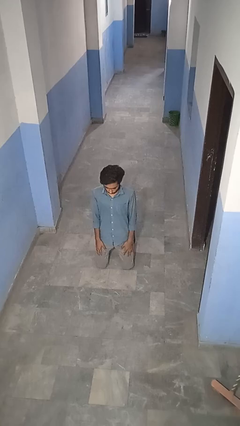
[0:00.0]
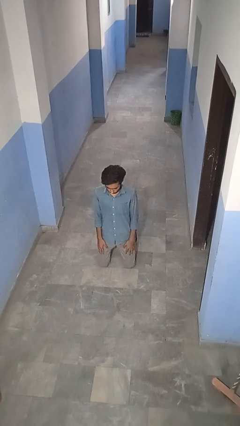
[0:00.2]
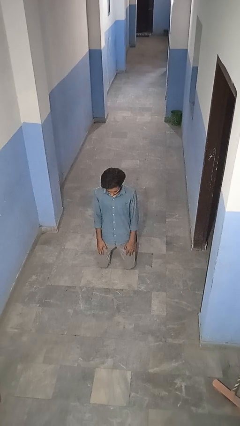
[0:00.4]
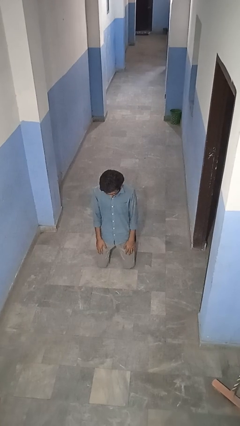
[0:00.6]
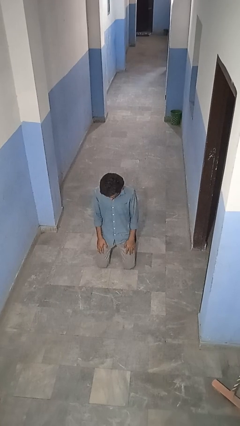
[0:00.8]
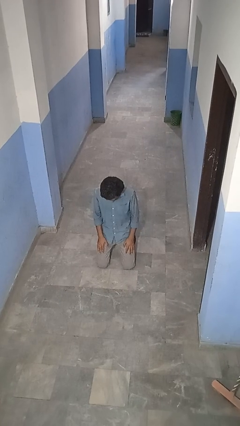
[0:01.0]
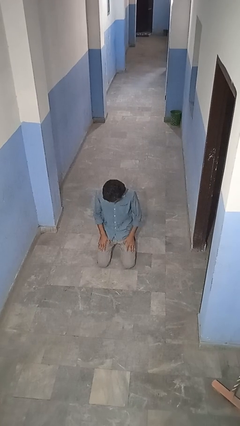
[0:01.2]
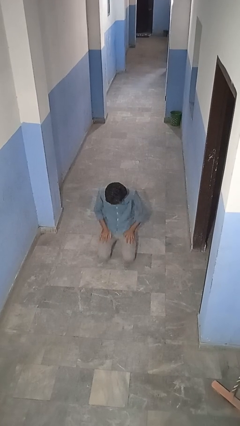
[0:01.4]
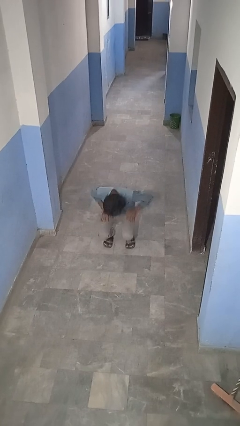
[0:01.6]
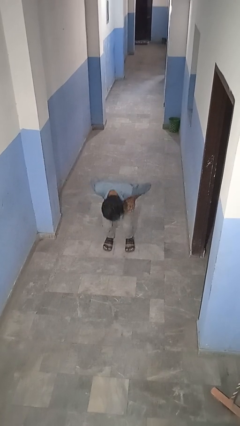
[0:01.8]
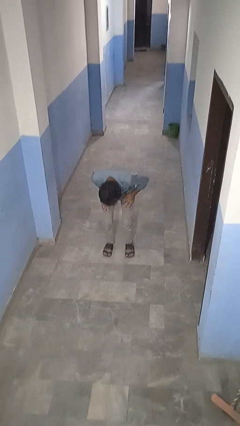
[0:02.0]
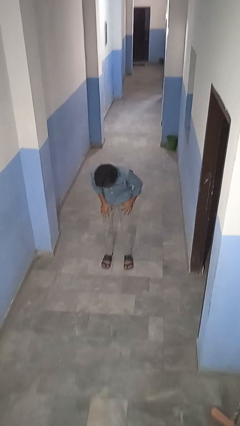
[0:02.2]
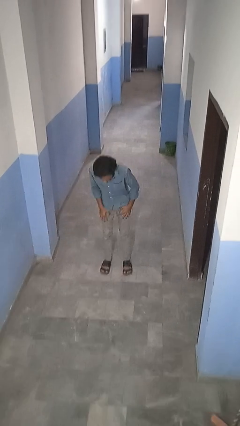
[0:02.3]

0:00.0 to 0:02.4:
person stands up from floor

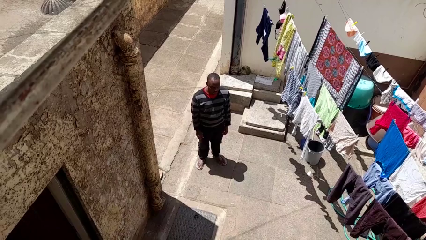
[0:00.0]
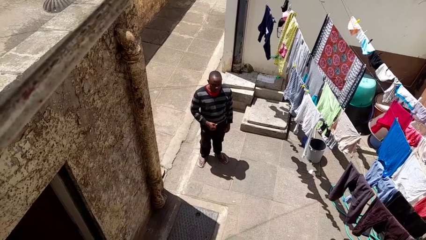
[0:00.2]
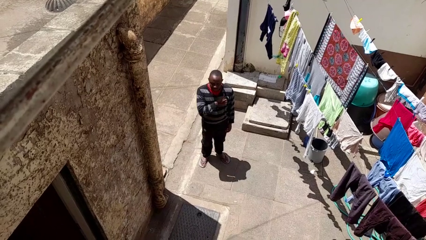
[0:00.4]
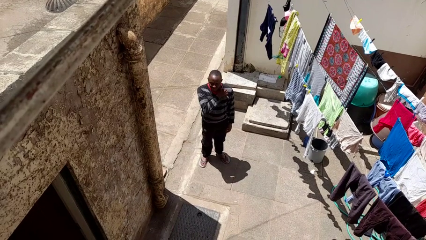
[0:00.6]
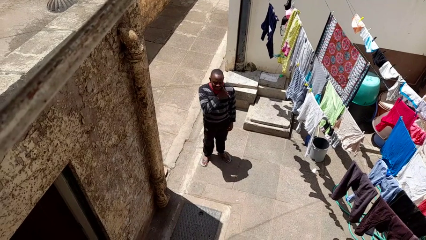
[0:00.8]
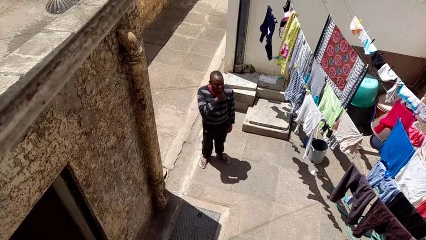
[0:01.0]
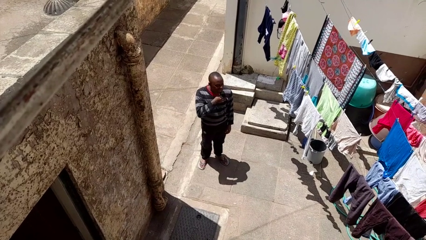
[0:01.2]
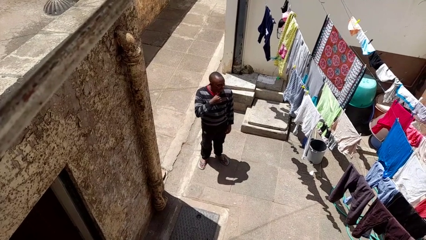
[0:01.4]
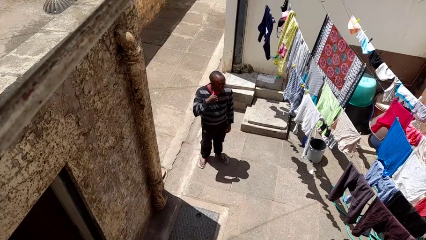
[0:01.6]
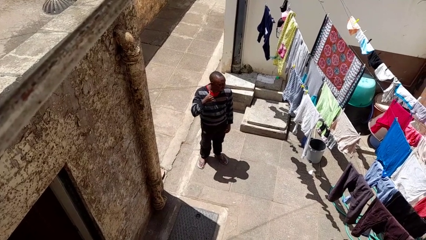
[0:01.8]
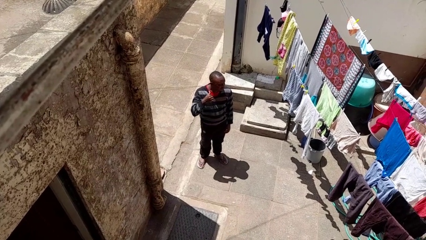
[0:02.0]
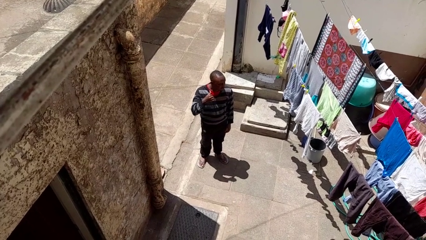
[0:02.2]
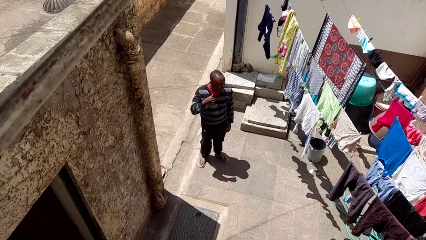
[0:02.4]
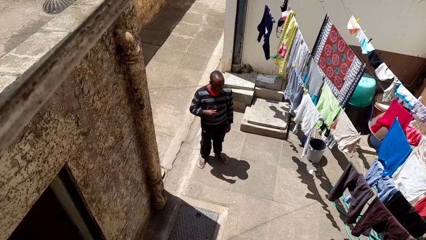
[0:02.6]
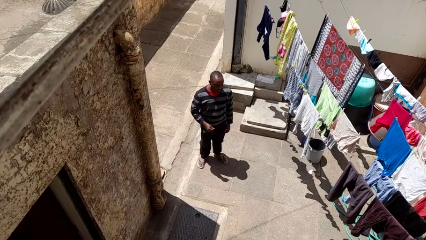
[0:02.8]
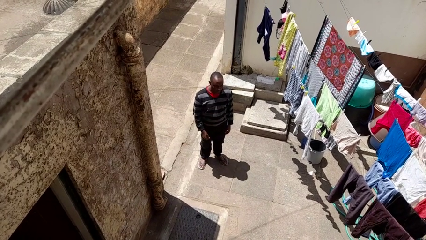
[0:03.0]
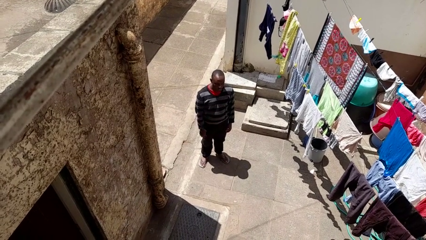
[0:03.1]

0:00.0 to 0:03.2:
person gestures cut

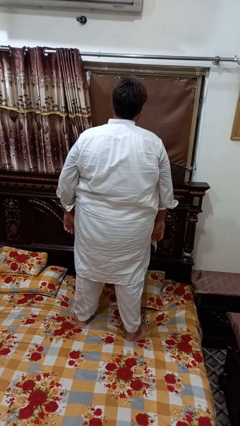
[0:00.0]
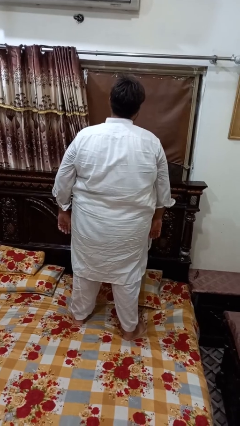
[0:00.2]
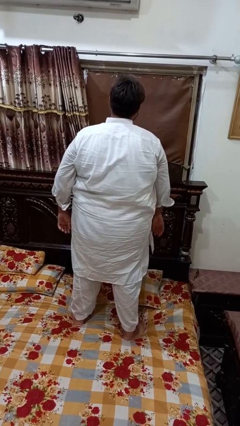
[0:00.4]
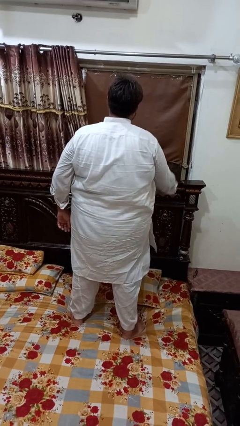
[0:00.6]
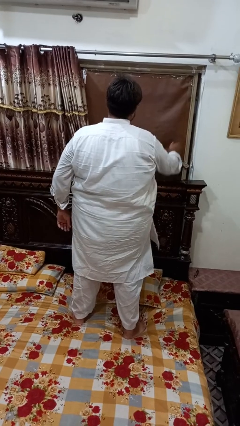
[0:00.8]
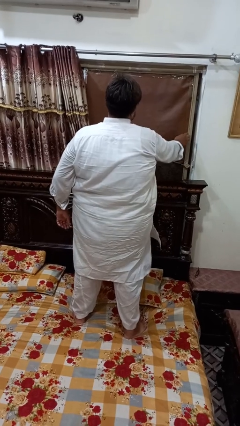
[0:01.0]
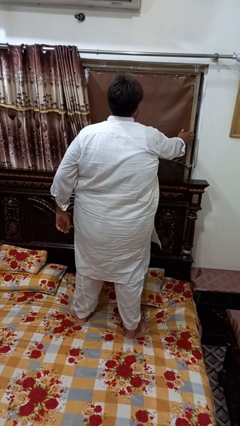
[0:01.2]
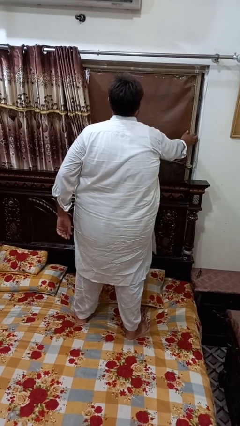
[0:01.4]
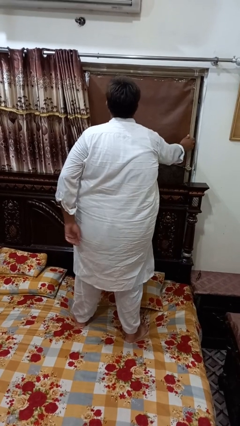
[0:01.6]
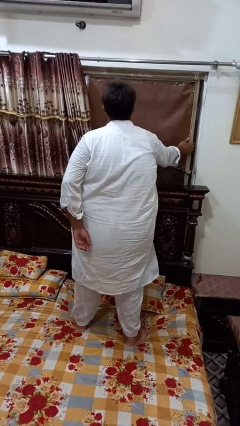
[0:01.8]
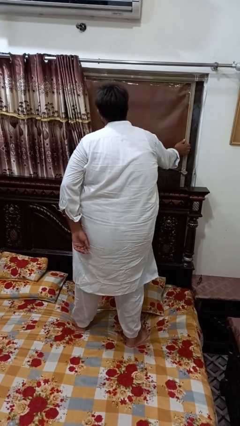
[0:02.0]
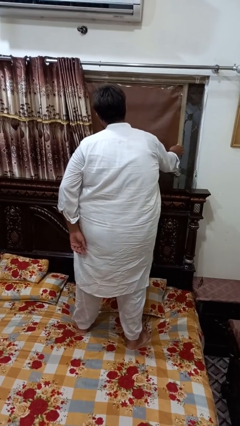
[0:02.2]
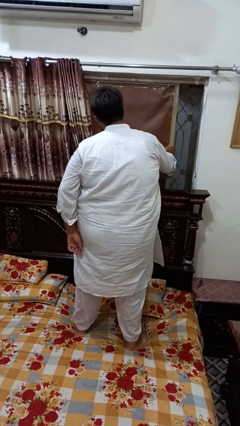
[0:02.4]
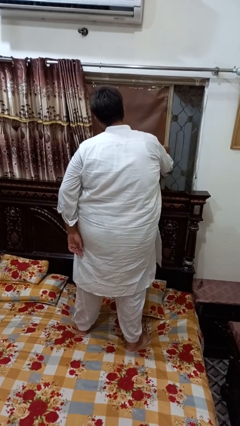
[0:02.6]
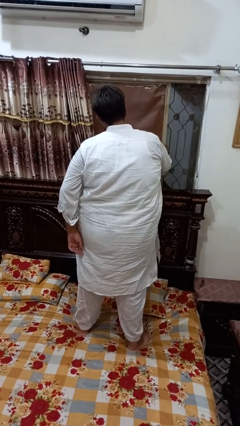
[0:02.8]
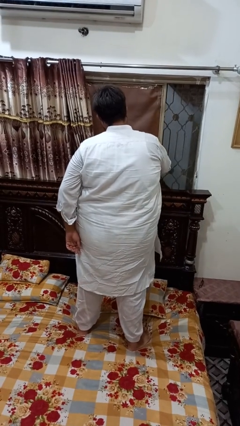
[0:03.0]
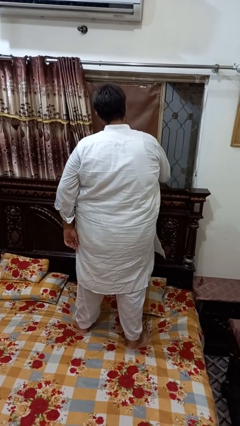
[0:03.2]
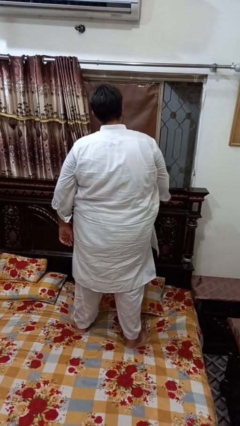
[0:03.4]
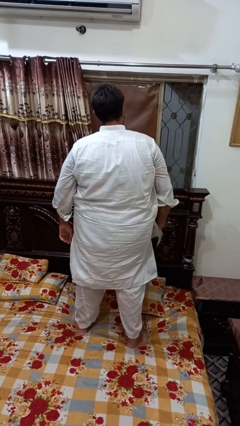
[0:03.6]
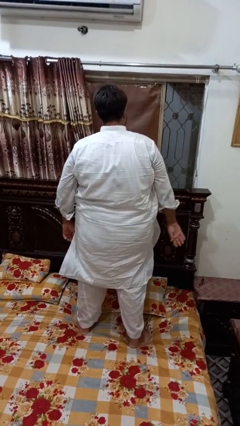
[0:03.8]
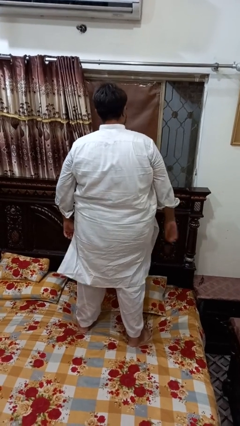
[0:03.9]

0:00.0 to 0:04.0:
person opens home window

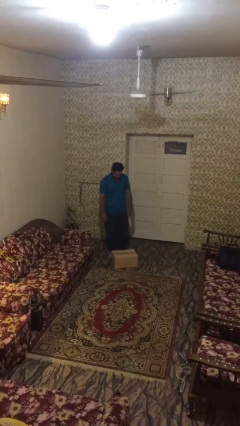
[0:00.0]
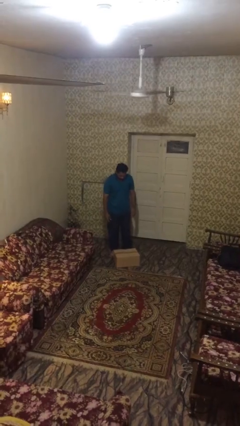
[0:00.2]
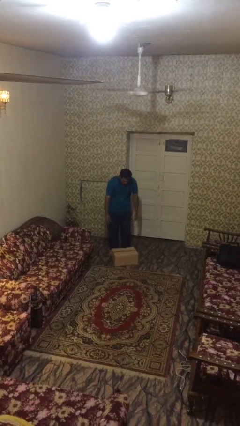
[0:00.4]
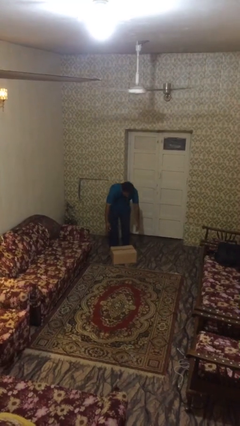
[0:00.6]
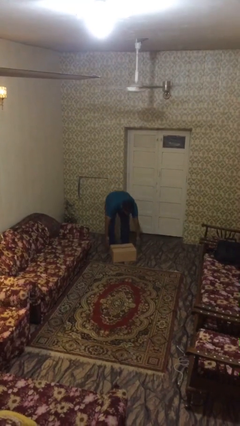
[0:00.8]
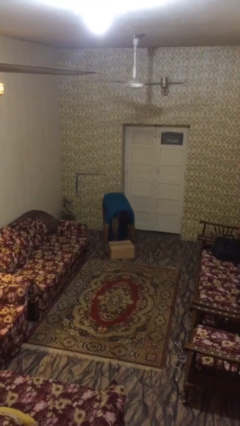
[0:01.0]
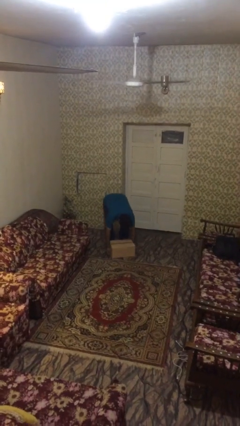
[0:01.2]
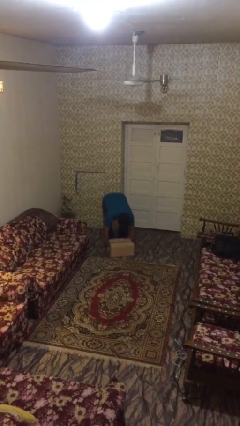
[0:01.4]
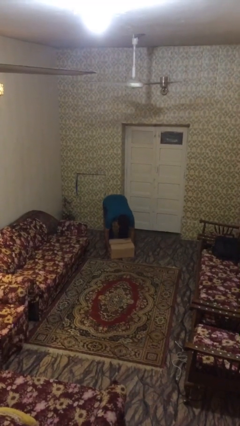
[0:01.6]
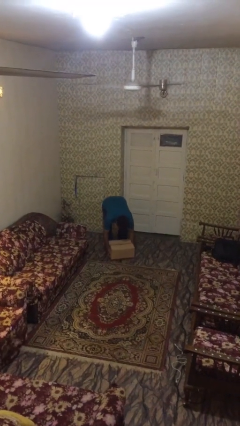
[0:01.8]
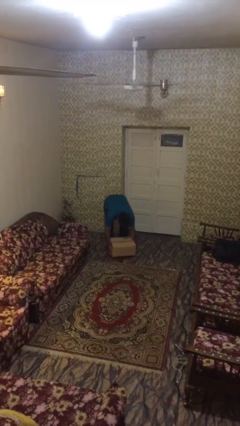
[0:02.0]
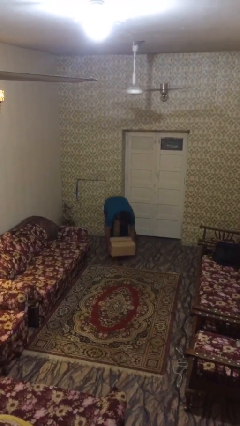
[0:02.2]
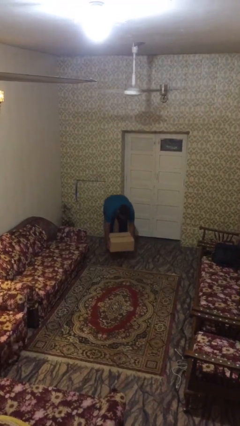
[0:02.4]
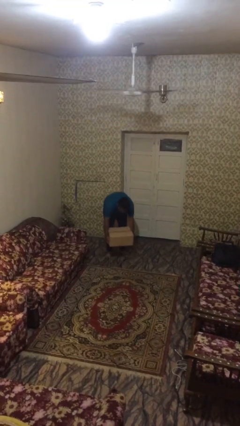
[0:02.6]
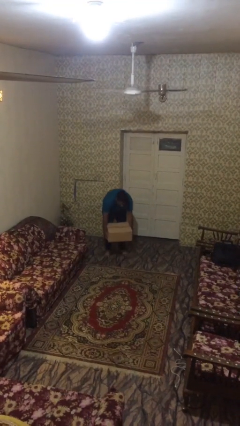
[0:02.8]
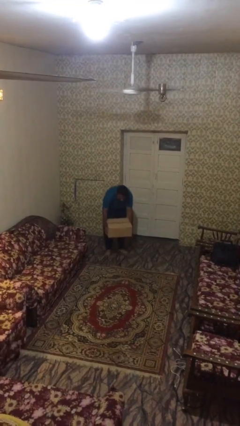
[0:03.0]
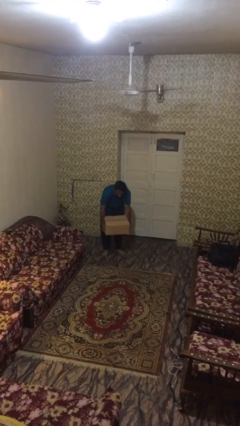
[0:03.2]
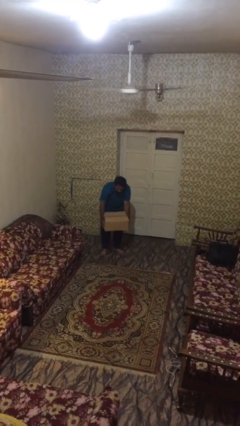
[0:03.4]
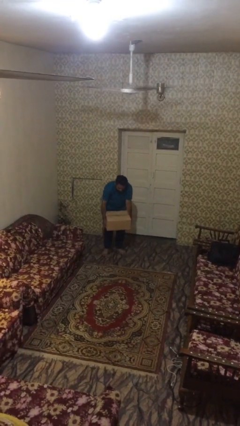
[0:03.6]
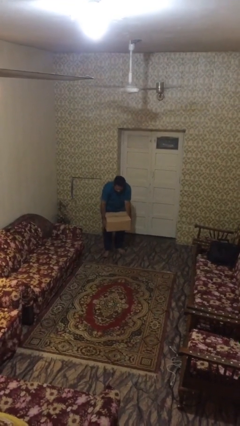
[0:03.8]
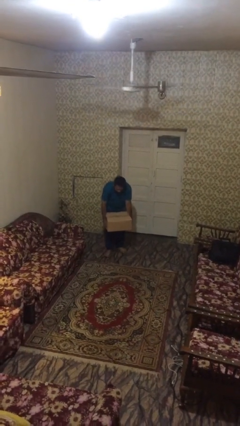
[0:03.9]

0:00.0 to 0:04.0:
person picks up object from floor

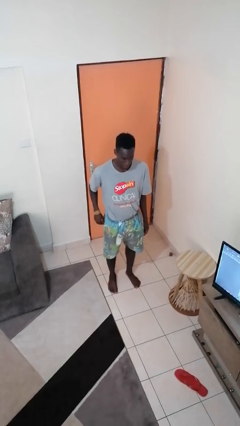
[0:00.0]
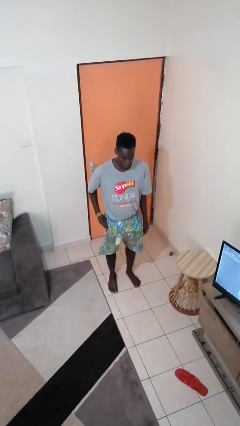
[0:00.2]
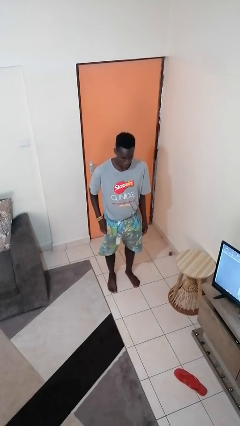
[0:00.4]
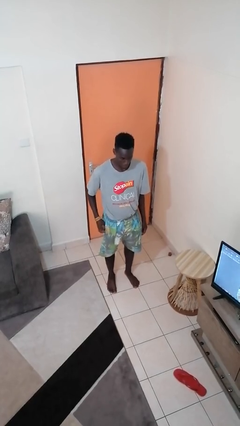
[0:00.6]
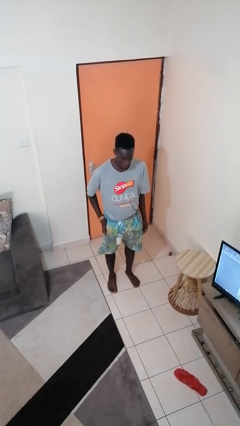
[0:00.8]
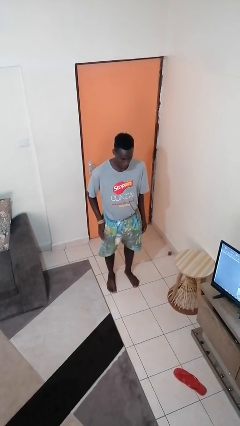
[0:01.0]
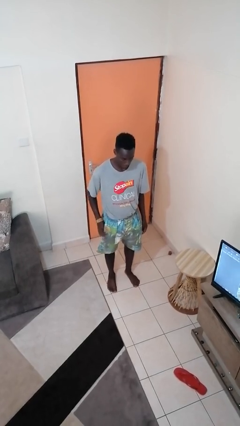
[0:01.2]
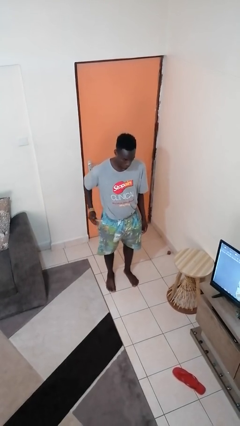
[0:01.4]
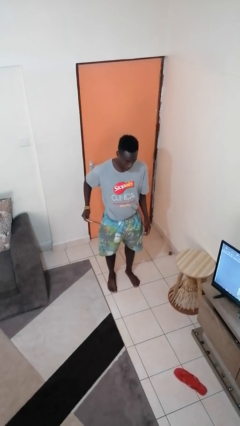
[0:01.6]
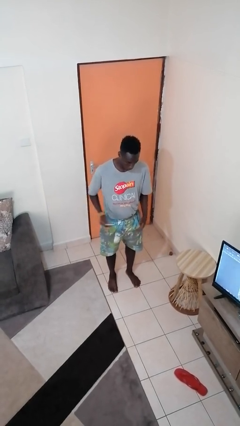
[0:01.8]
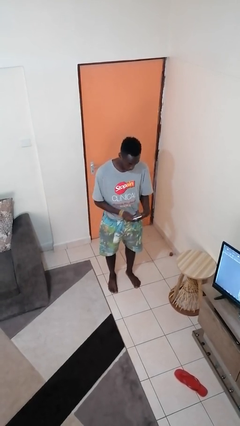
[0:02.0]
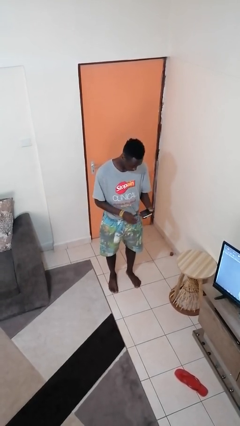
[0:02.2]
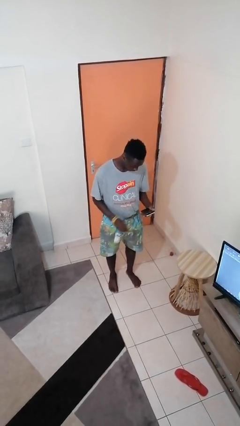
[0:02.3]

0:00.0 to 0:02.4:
person takes phone from pocket

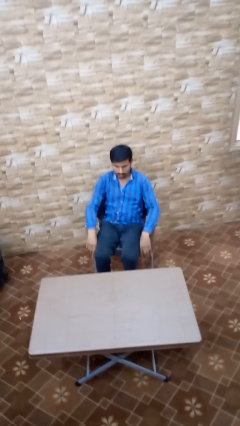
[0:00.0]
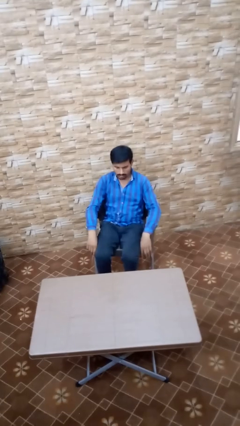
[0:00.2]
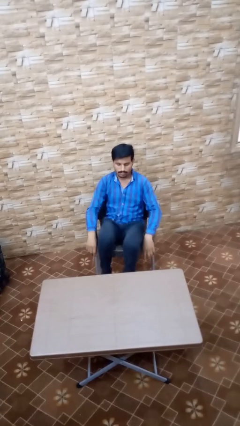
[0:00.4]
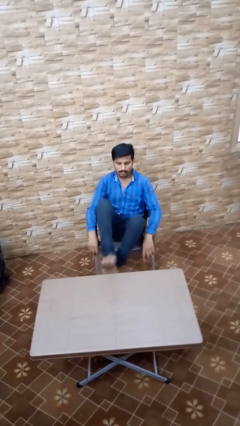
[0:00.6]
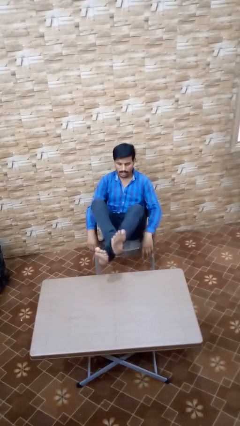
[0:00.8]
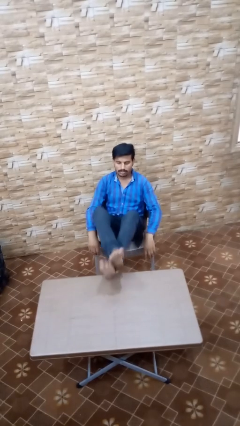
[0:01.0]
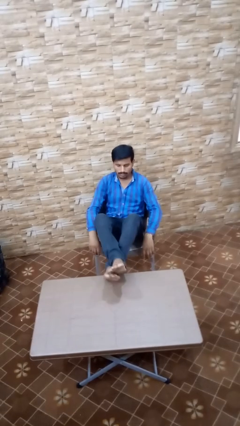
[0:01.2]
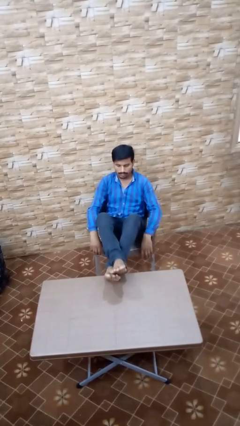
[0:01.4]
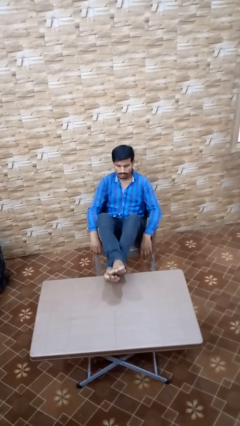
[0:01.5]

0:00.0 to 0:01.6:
person puts feet up
